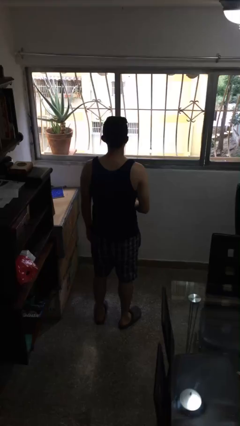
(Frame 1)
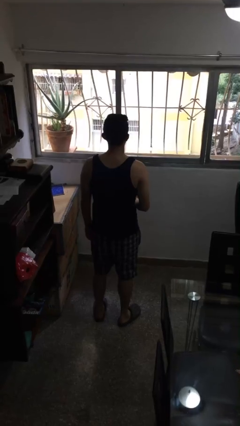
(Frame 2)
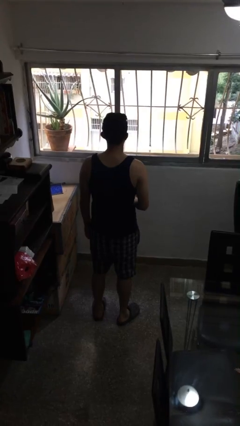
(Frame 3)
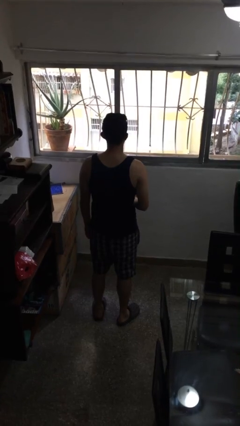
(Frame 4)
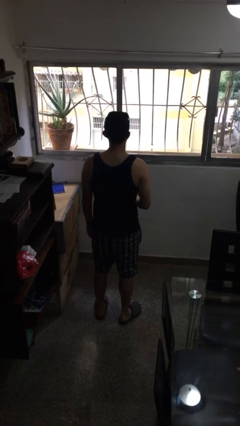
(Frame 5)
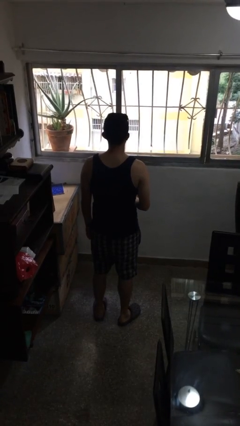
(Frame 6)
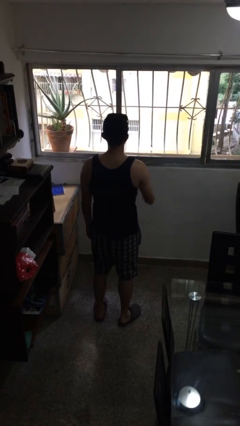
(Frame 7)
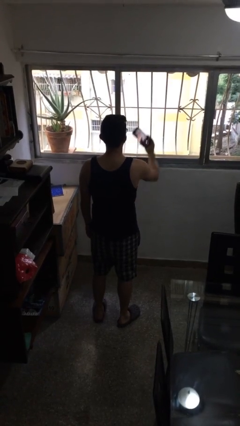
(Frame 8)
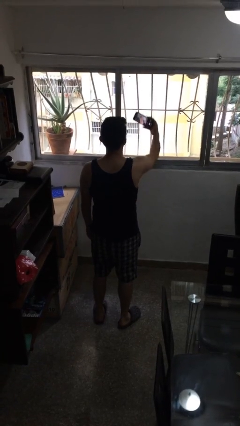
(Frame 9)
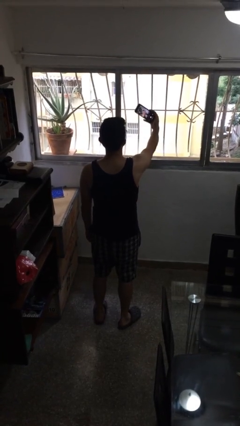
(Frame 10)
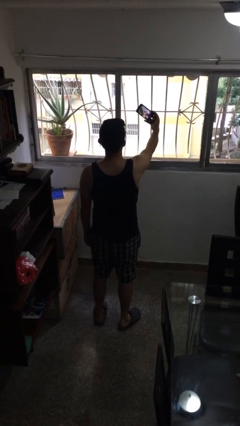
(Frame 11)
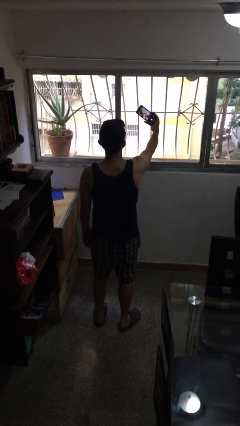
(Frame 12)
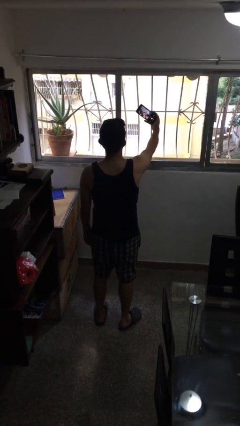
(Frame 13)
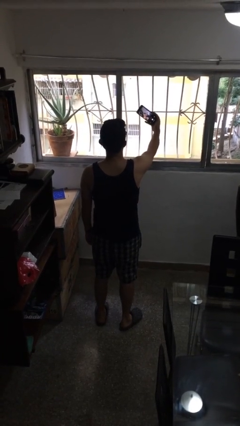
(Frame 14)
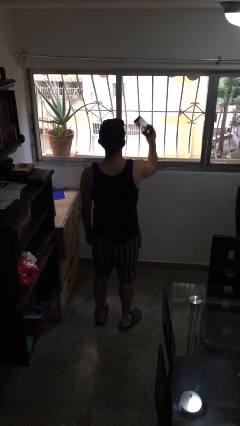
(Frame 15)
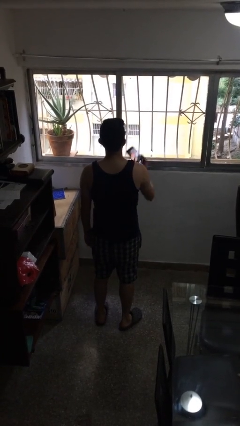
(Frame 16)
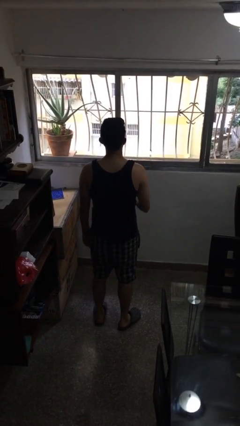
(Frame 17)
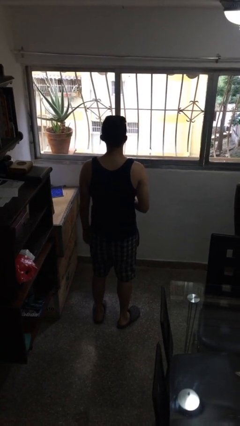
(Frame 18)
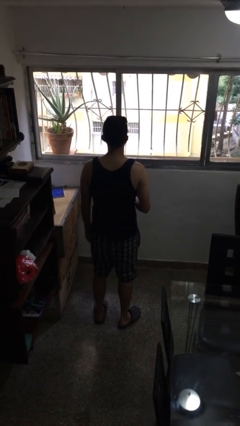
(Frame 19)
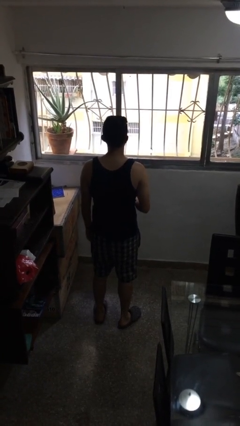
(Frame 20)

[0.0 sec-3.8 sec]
person takes selfie

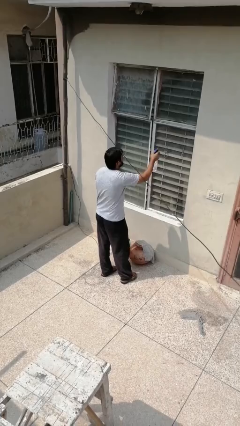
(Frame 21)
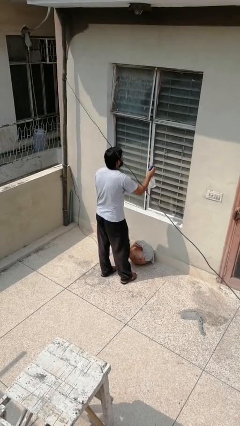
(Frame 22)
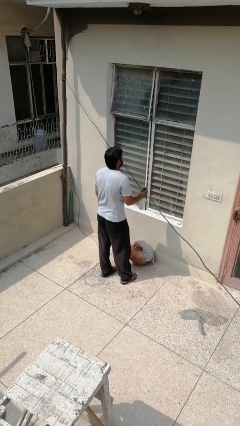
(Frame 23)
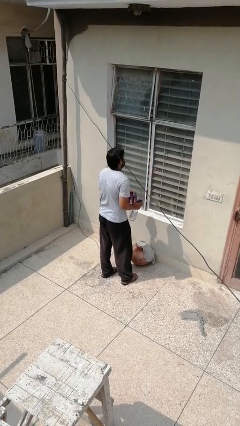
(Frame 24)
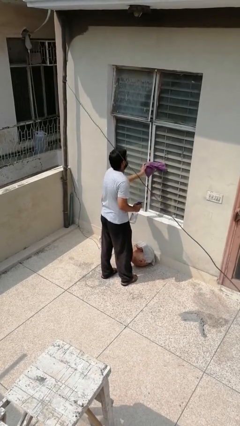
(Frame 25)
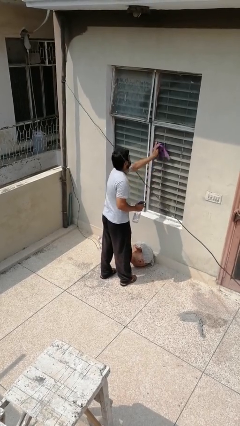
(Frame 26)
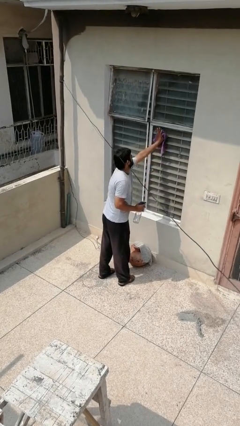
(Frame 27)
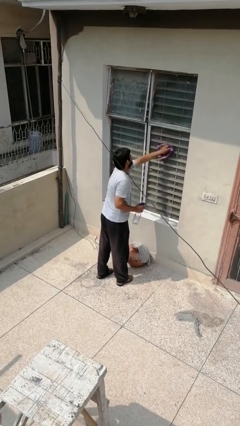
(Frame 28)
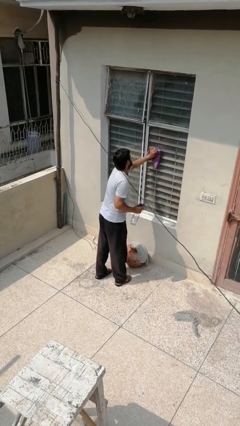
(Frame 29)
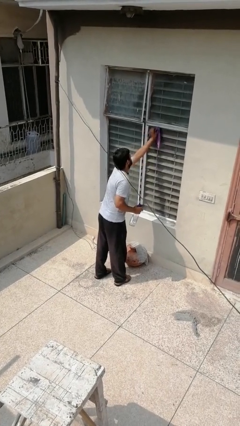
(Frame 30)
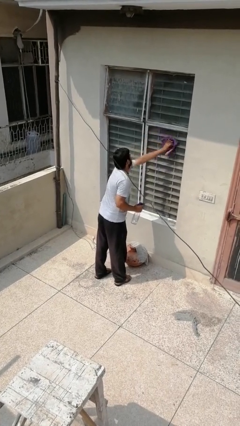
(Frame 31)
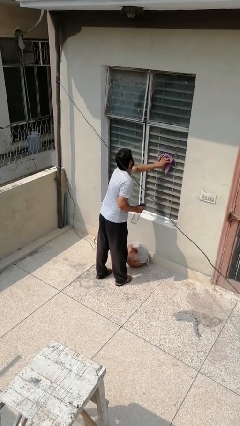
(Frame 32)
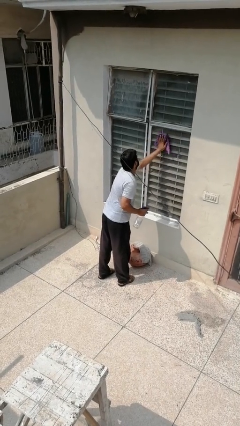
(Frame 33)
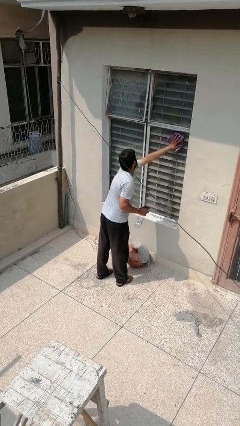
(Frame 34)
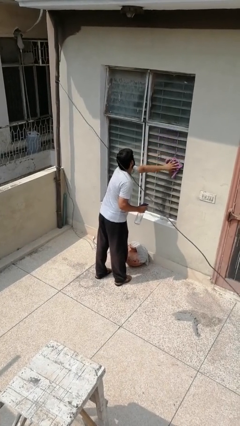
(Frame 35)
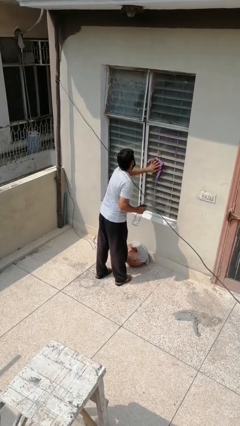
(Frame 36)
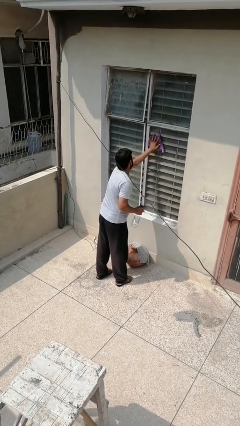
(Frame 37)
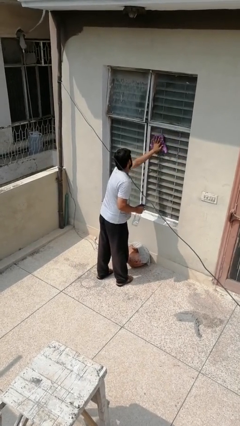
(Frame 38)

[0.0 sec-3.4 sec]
person washes window

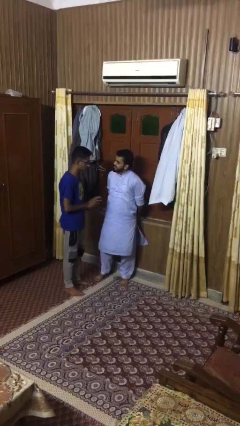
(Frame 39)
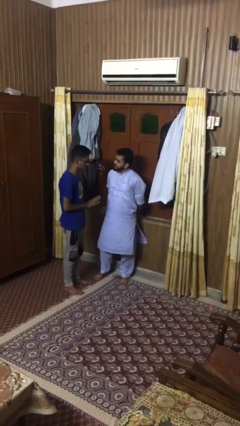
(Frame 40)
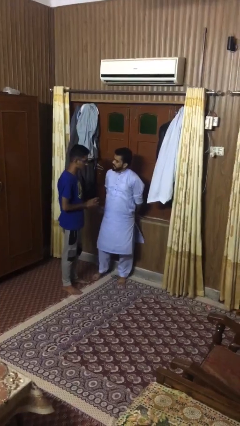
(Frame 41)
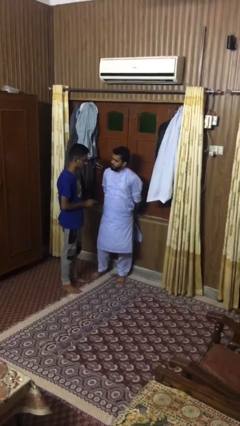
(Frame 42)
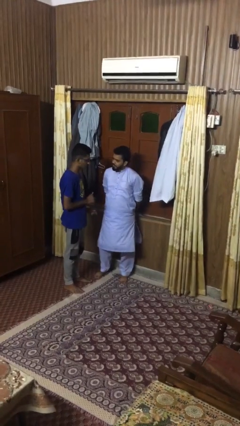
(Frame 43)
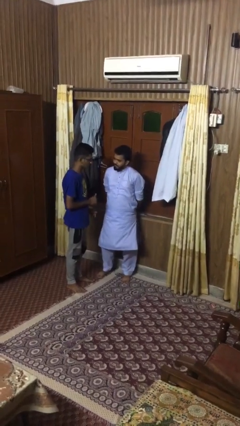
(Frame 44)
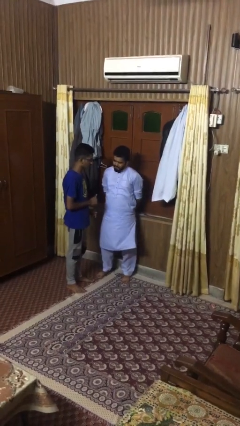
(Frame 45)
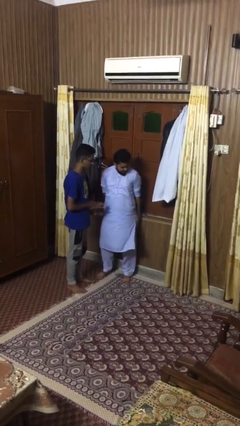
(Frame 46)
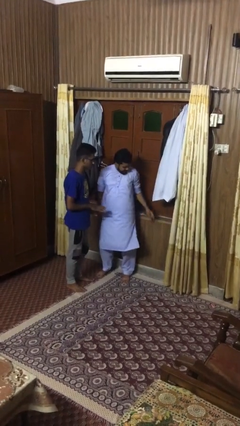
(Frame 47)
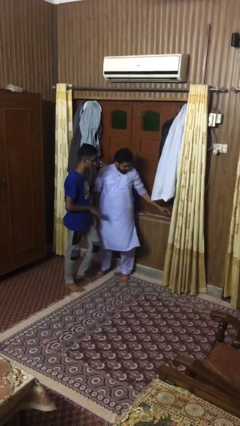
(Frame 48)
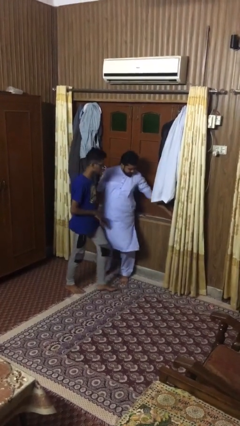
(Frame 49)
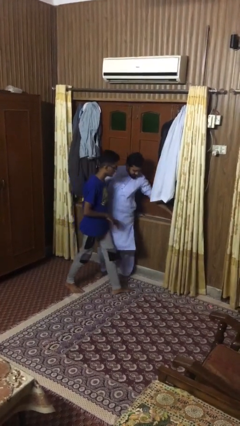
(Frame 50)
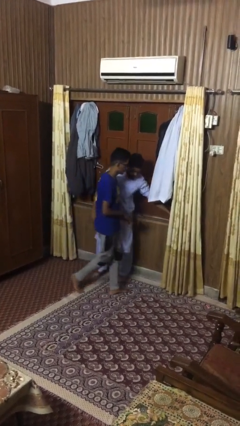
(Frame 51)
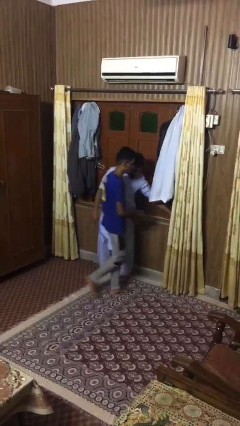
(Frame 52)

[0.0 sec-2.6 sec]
person talks to person

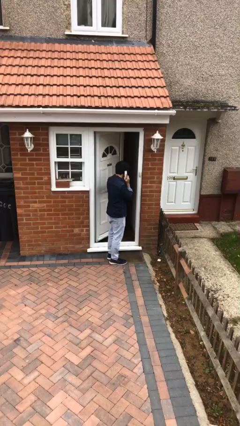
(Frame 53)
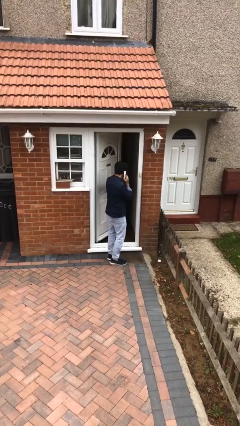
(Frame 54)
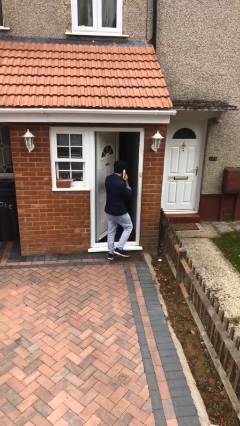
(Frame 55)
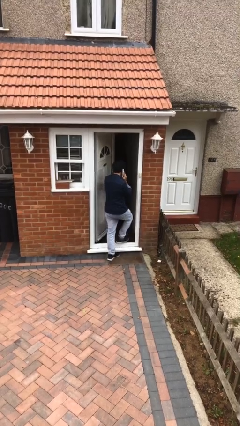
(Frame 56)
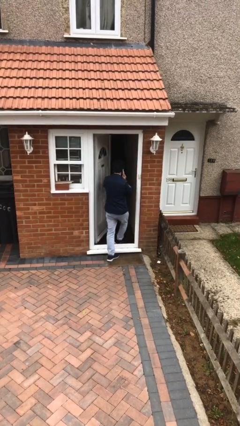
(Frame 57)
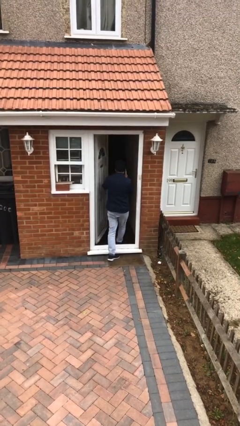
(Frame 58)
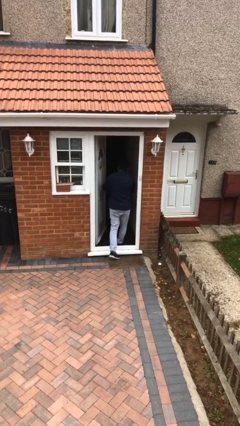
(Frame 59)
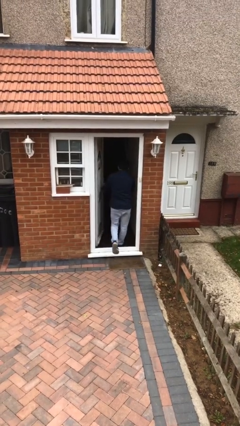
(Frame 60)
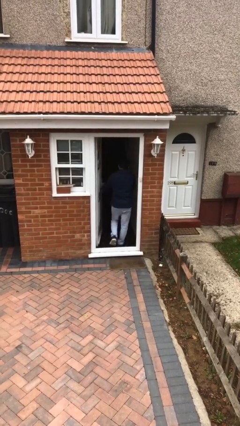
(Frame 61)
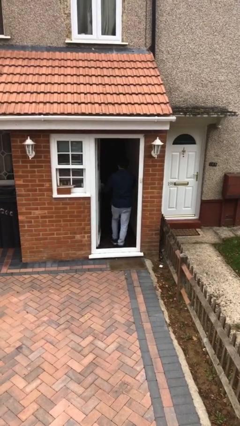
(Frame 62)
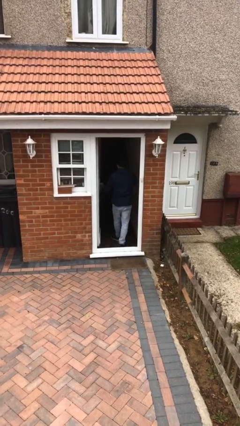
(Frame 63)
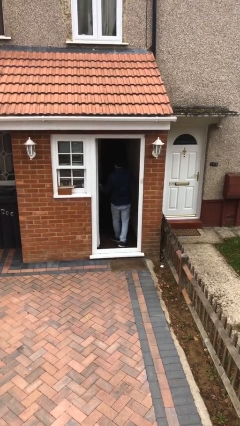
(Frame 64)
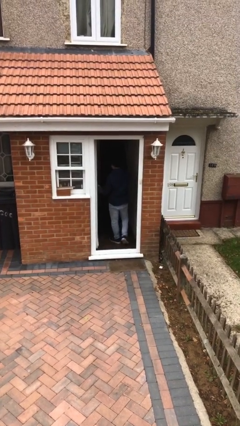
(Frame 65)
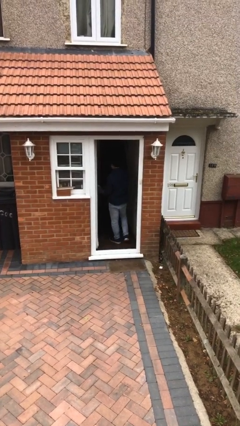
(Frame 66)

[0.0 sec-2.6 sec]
person exits scene through structure

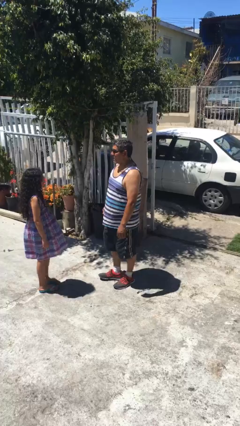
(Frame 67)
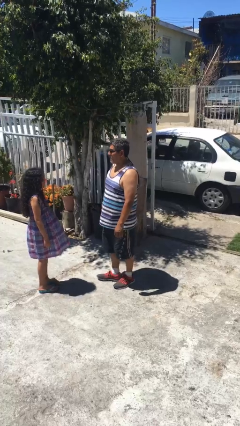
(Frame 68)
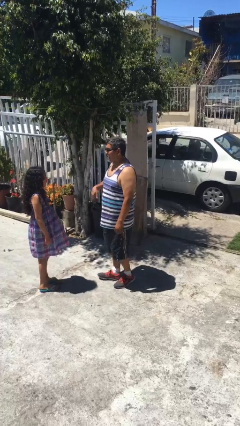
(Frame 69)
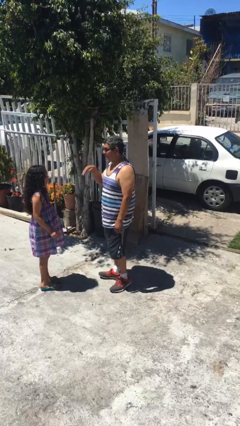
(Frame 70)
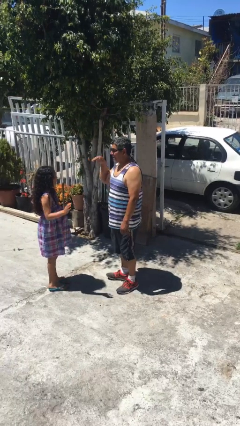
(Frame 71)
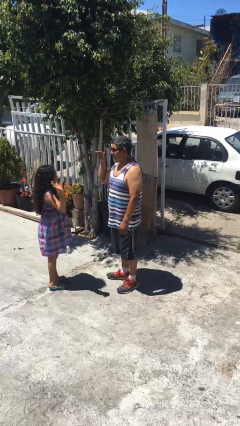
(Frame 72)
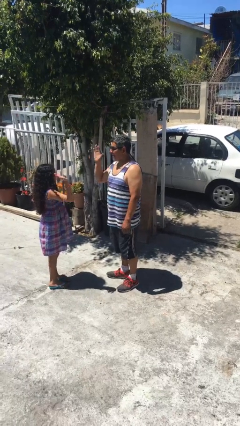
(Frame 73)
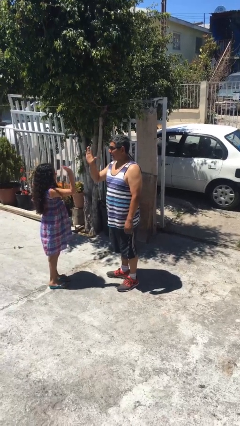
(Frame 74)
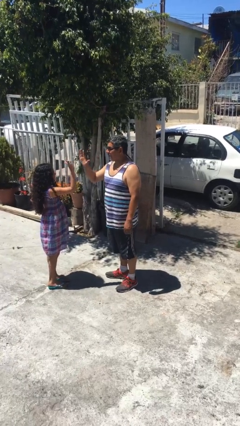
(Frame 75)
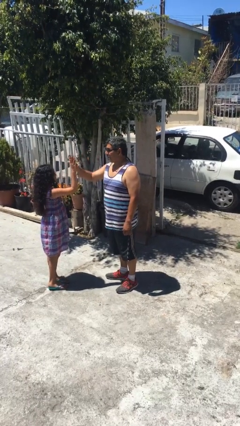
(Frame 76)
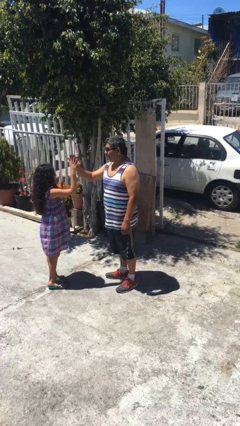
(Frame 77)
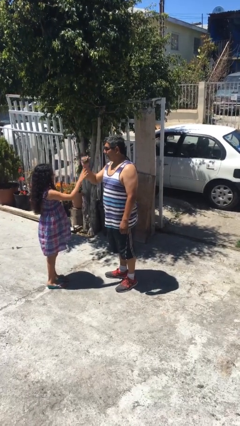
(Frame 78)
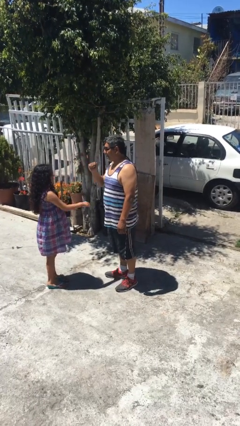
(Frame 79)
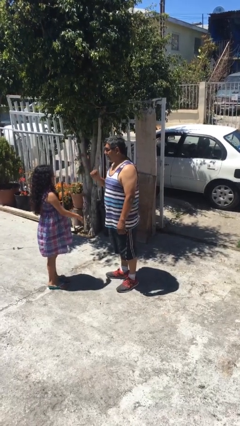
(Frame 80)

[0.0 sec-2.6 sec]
person highfives hand

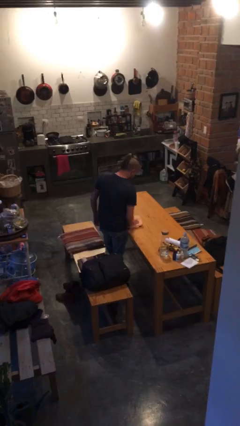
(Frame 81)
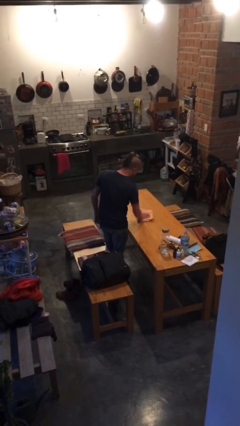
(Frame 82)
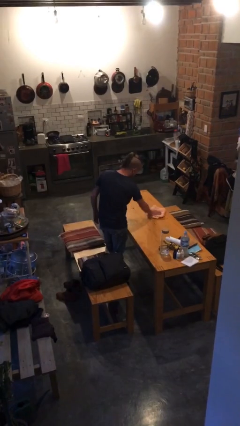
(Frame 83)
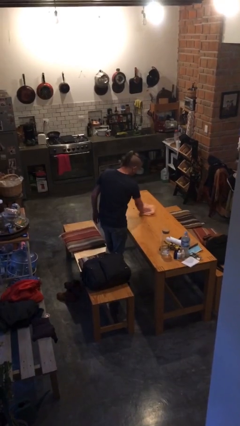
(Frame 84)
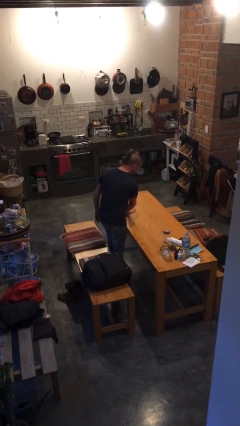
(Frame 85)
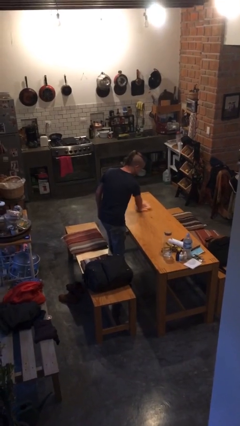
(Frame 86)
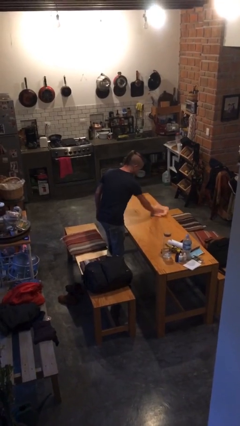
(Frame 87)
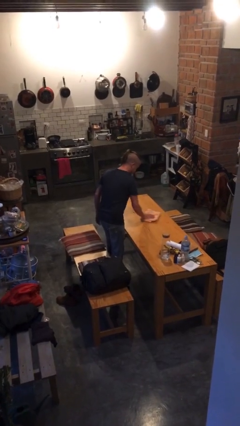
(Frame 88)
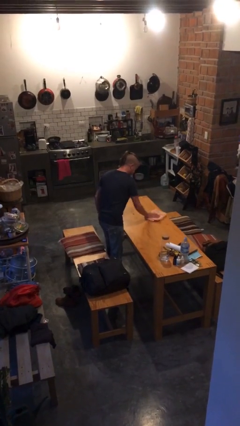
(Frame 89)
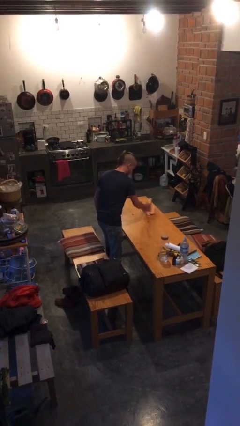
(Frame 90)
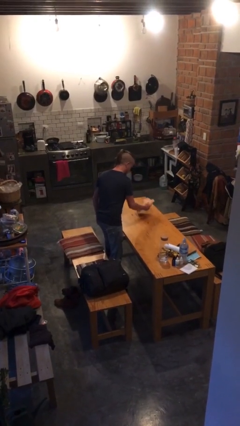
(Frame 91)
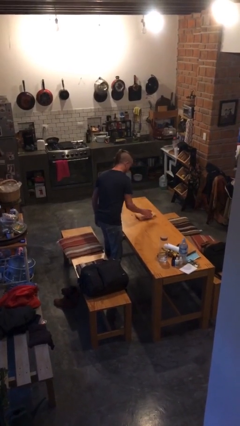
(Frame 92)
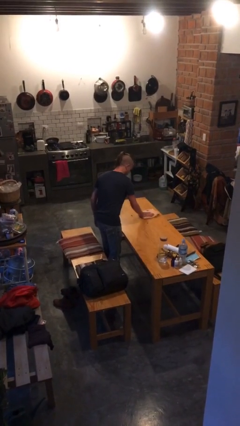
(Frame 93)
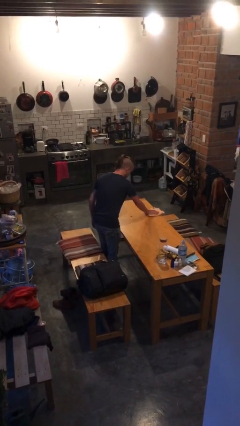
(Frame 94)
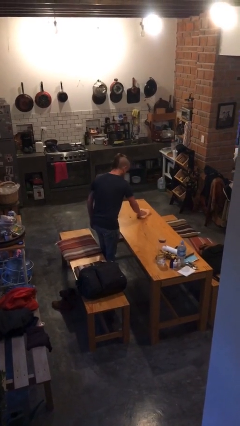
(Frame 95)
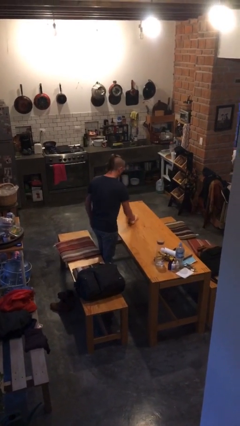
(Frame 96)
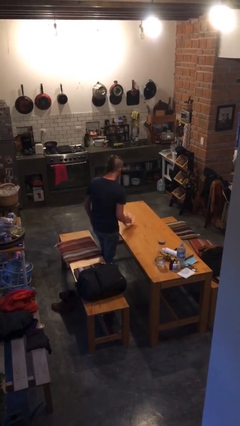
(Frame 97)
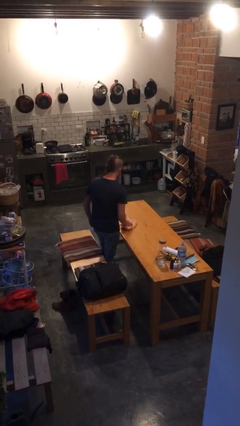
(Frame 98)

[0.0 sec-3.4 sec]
person cleans table with rag
